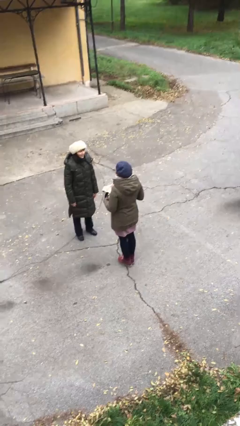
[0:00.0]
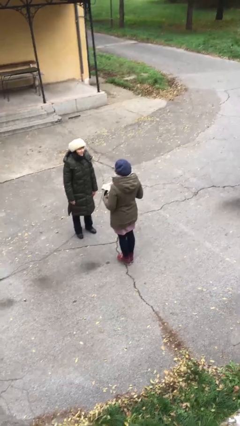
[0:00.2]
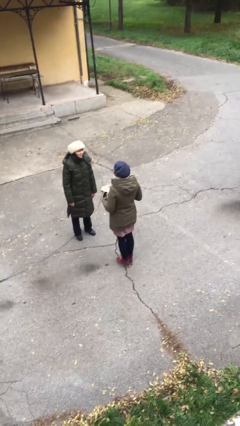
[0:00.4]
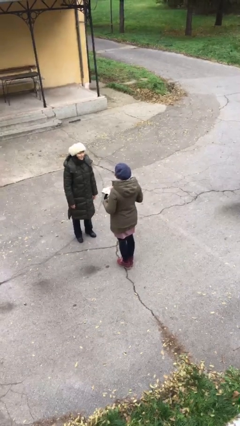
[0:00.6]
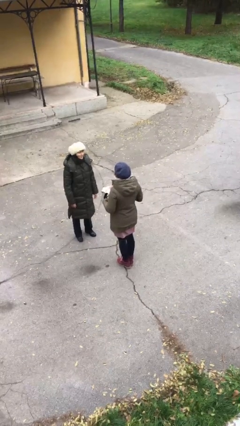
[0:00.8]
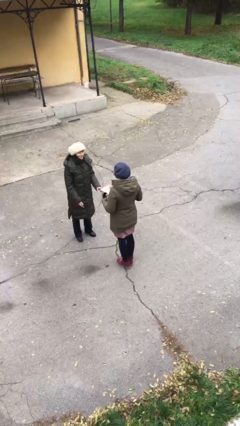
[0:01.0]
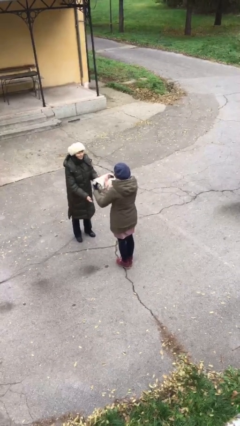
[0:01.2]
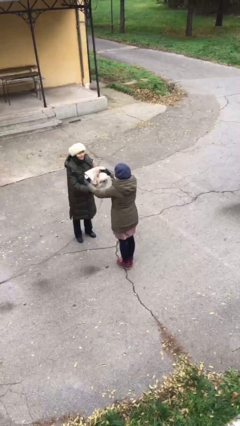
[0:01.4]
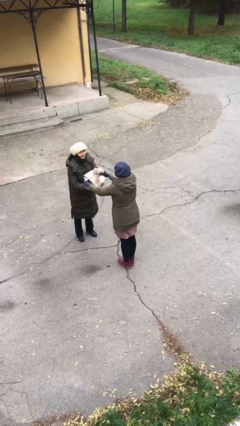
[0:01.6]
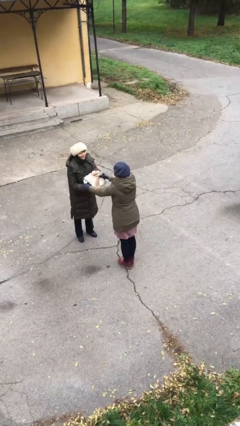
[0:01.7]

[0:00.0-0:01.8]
person transfers object to person

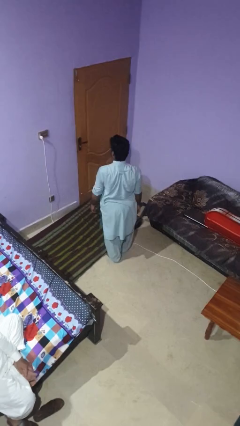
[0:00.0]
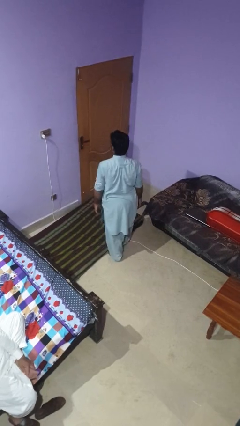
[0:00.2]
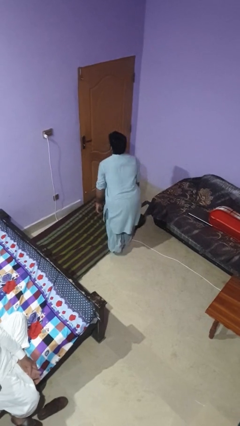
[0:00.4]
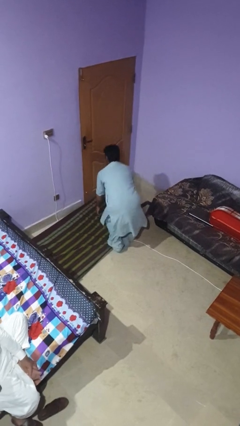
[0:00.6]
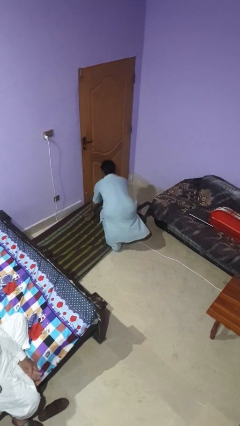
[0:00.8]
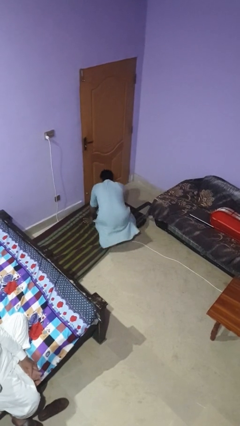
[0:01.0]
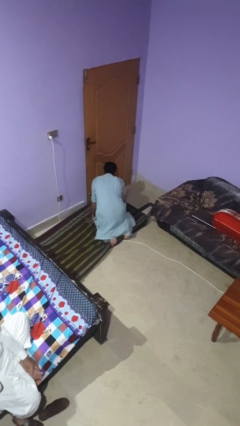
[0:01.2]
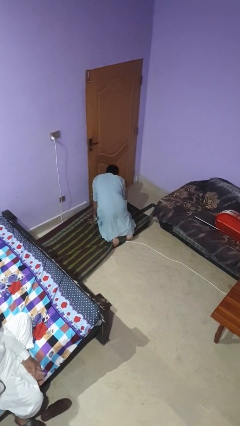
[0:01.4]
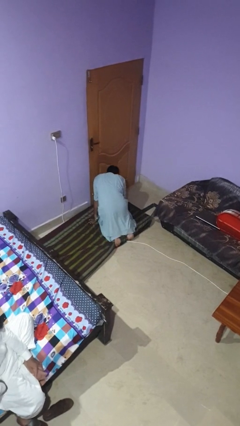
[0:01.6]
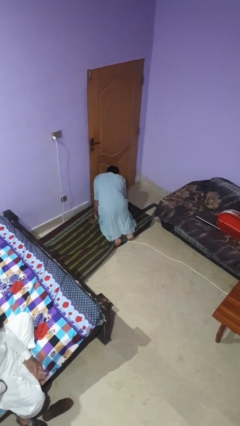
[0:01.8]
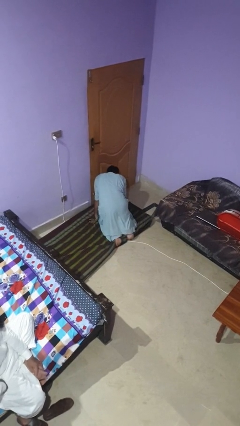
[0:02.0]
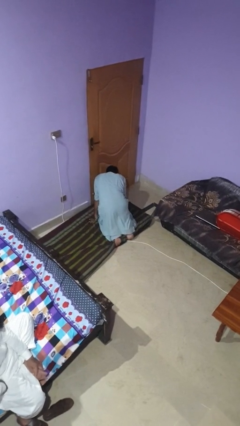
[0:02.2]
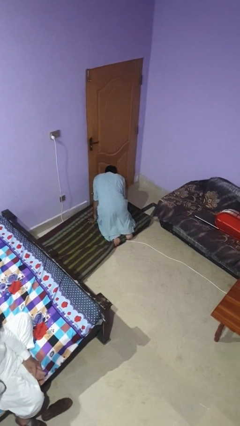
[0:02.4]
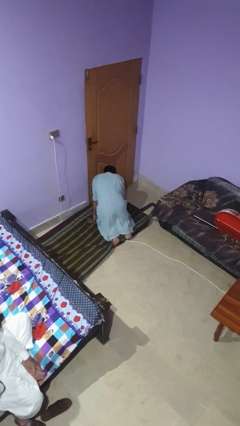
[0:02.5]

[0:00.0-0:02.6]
person trips on object on floor

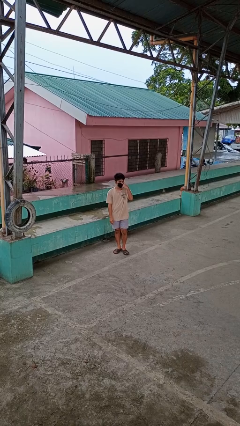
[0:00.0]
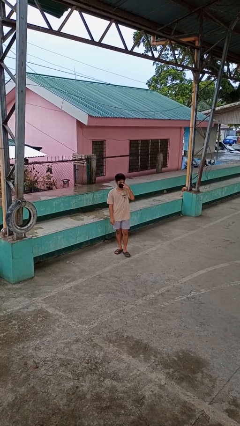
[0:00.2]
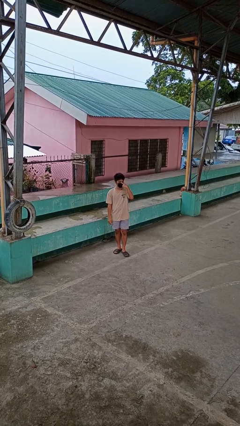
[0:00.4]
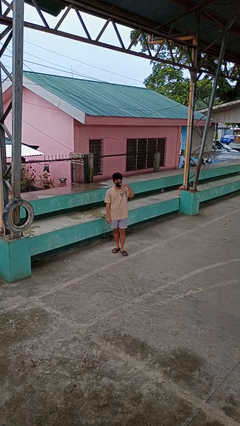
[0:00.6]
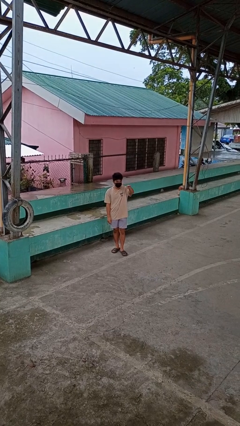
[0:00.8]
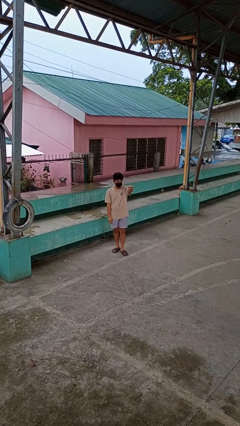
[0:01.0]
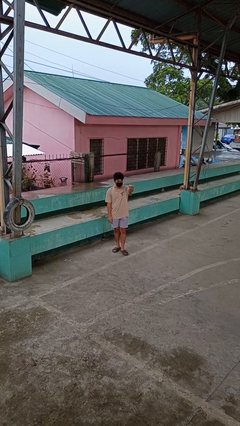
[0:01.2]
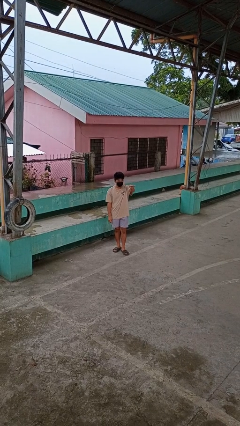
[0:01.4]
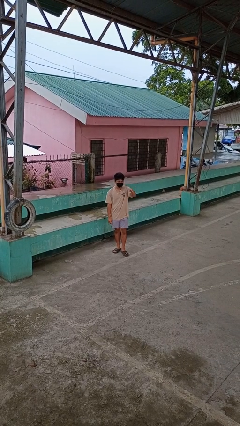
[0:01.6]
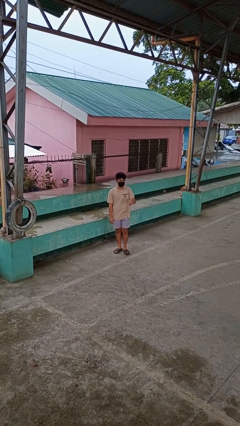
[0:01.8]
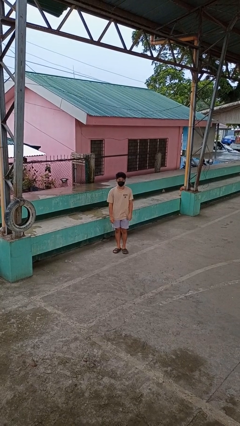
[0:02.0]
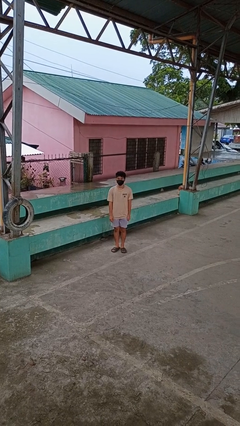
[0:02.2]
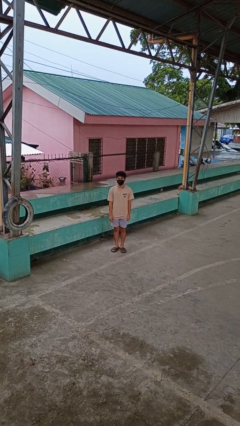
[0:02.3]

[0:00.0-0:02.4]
person gestures watch closely

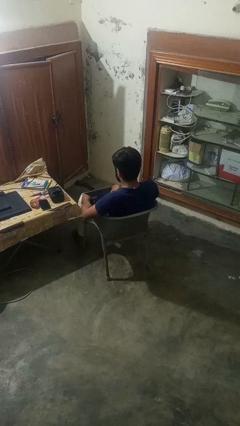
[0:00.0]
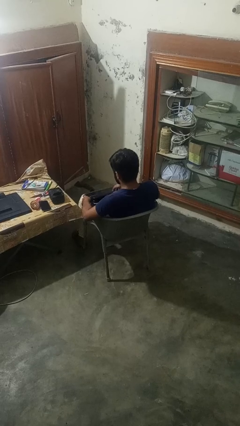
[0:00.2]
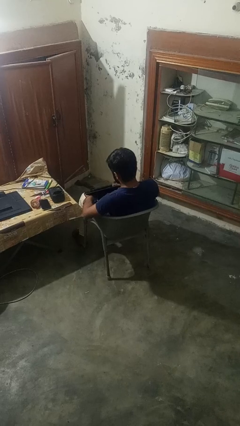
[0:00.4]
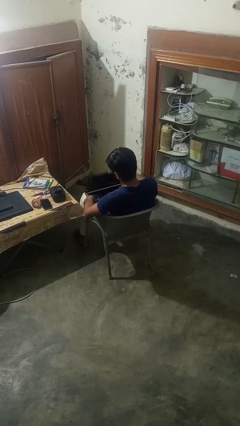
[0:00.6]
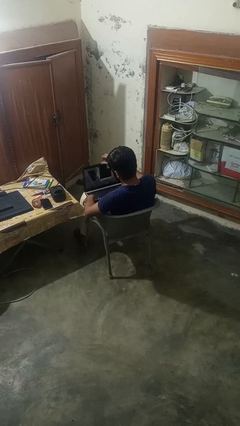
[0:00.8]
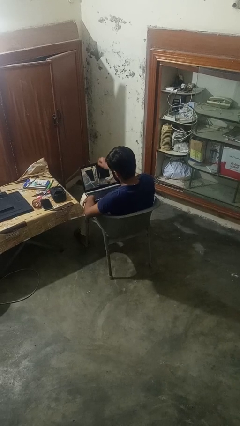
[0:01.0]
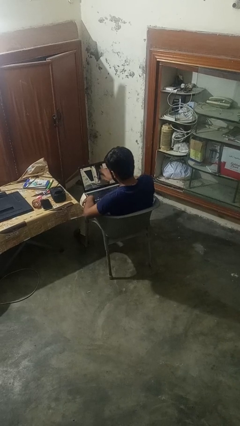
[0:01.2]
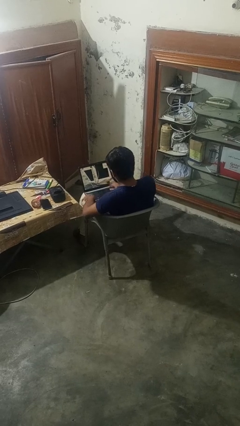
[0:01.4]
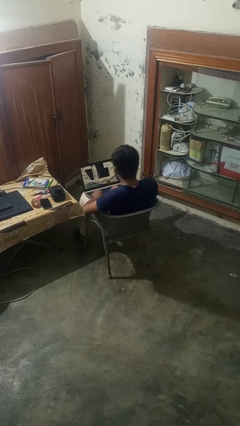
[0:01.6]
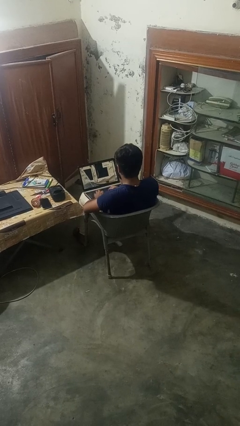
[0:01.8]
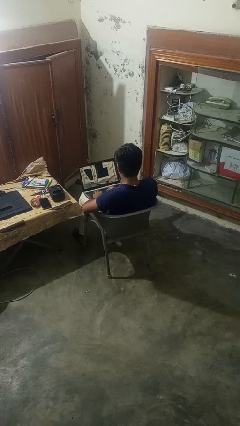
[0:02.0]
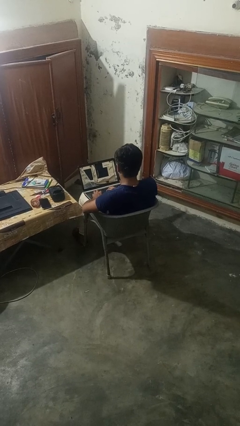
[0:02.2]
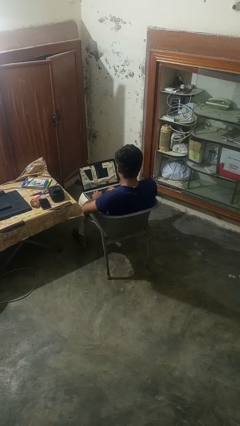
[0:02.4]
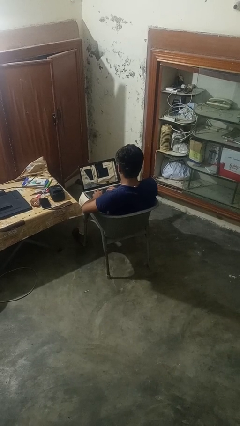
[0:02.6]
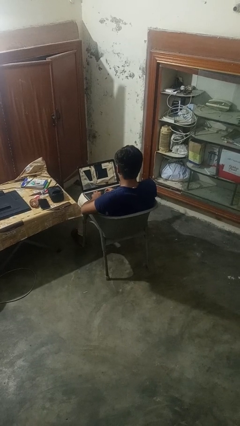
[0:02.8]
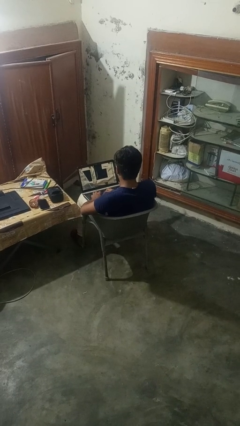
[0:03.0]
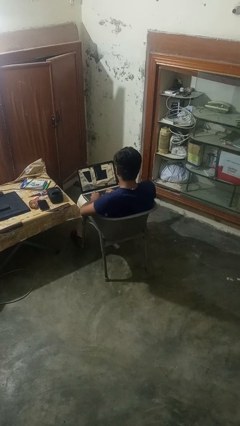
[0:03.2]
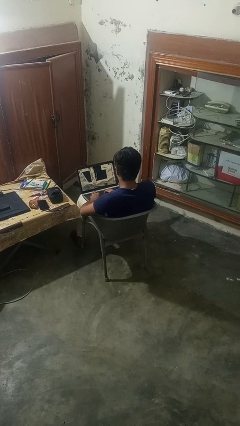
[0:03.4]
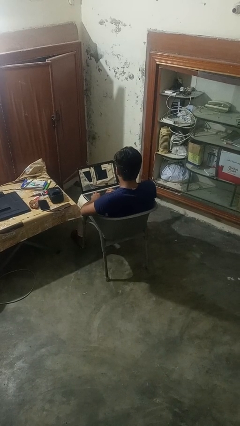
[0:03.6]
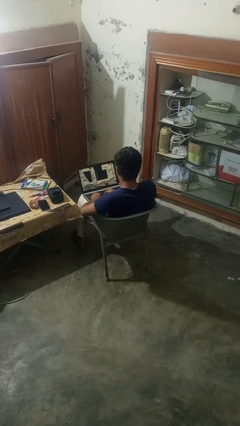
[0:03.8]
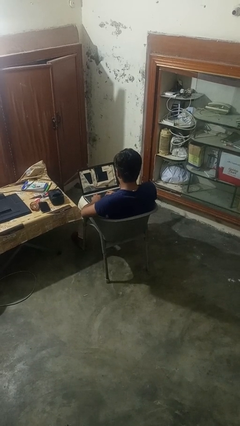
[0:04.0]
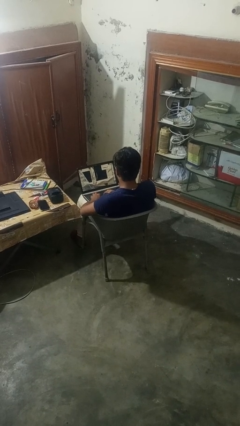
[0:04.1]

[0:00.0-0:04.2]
person opens laptop

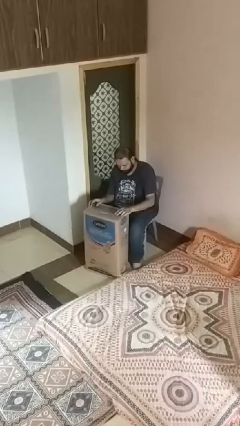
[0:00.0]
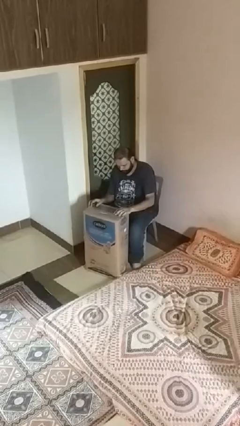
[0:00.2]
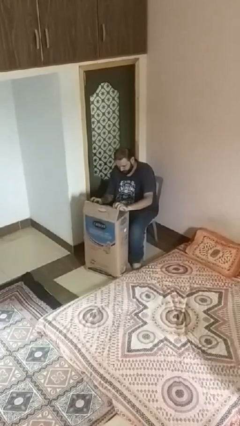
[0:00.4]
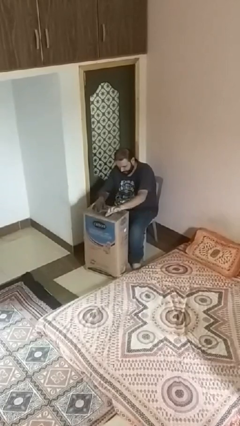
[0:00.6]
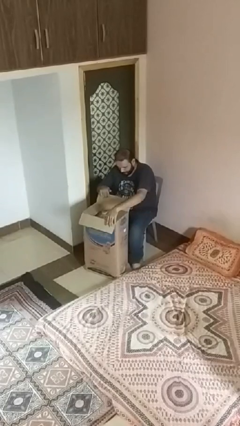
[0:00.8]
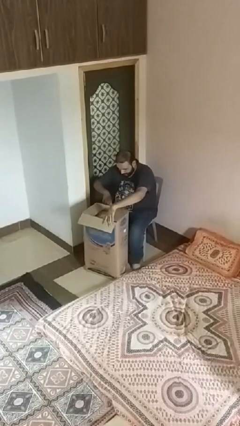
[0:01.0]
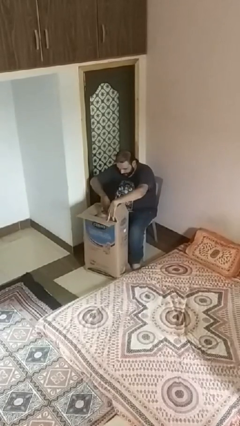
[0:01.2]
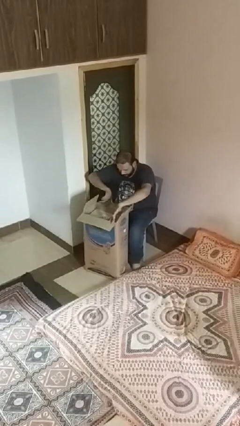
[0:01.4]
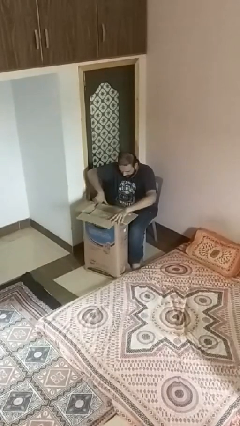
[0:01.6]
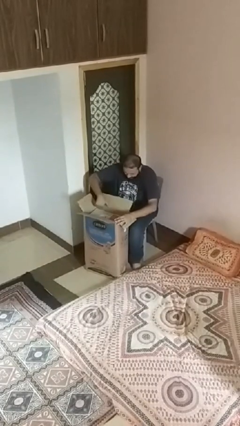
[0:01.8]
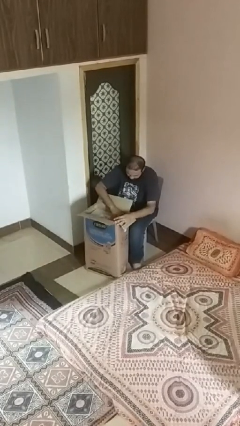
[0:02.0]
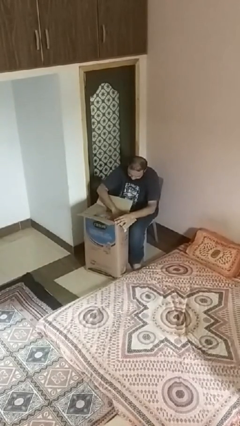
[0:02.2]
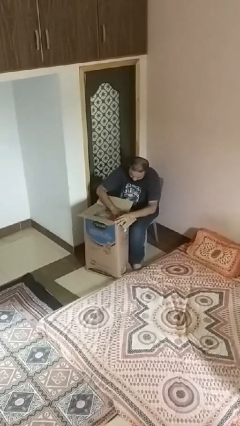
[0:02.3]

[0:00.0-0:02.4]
person searches in box

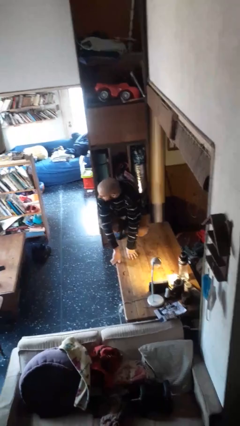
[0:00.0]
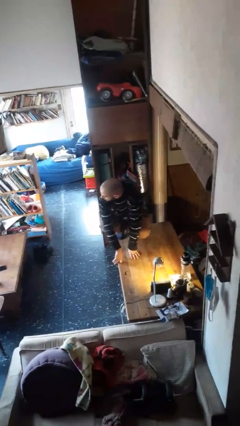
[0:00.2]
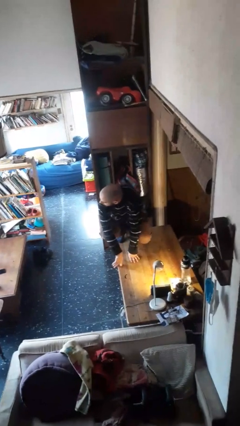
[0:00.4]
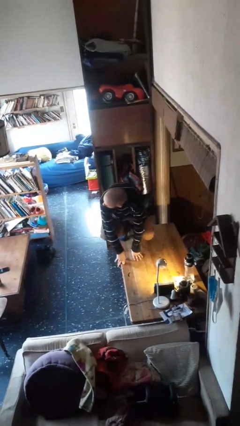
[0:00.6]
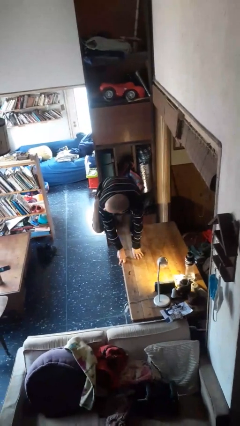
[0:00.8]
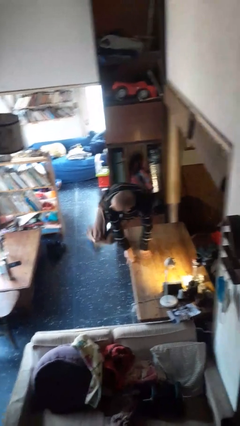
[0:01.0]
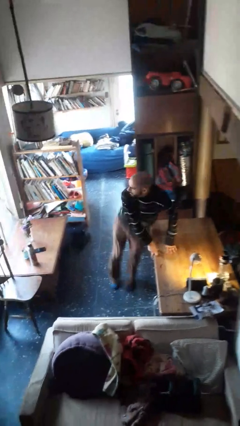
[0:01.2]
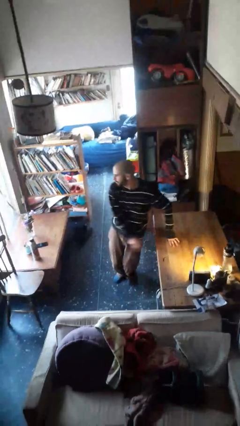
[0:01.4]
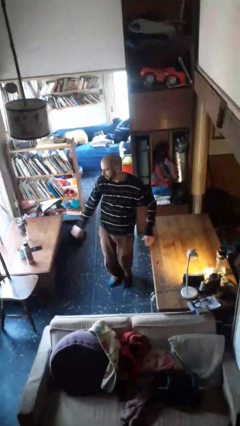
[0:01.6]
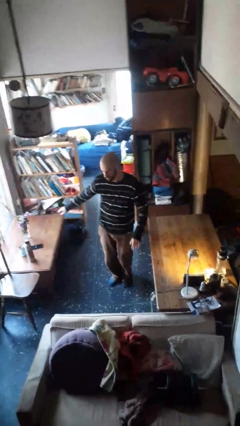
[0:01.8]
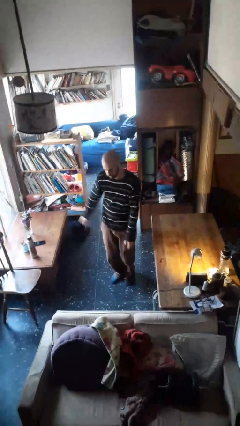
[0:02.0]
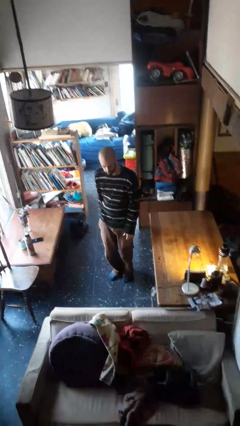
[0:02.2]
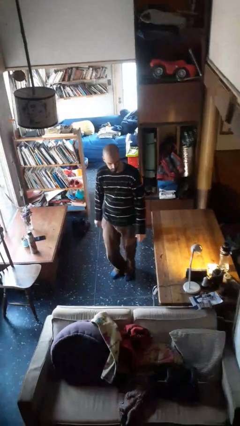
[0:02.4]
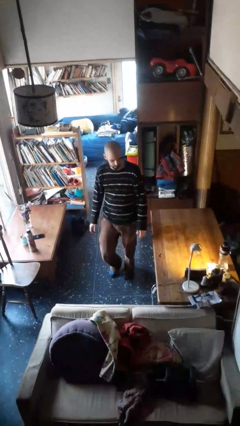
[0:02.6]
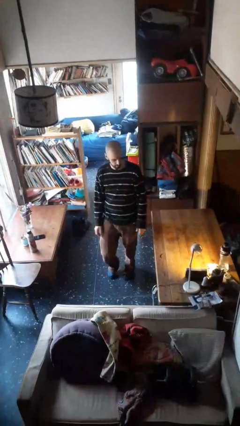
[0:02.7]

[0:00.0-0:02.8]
person climbs off table

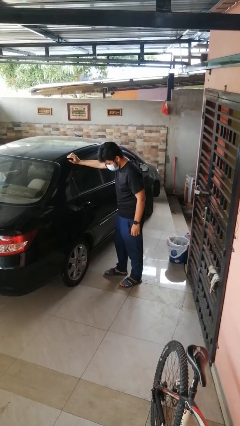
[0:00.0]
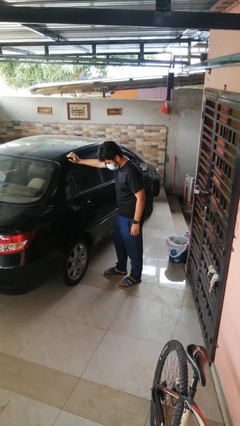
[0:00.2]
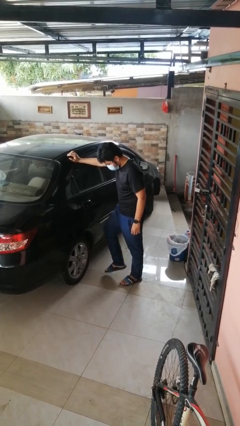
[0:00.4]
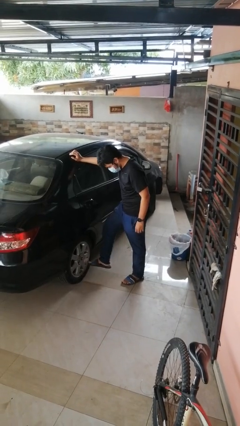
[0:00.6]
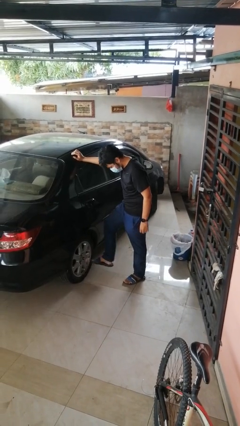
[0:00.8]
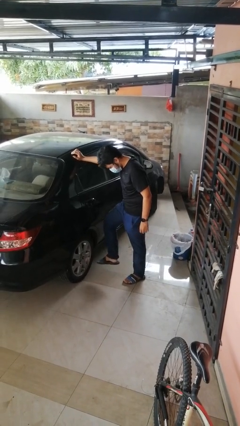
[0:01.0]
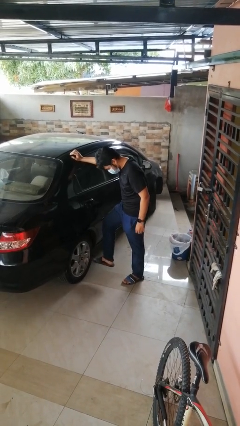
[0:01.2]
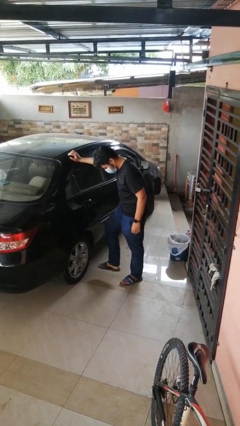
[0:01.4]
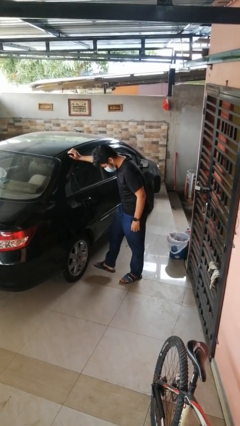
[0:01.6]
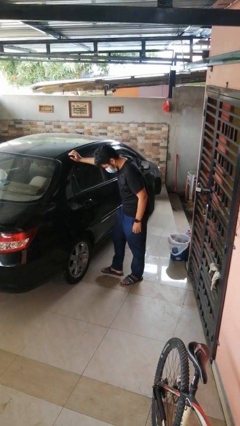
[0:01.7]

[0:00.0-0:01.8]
person kicks car tires
